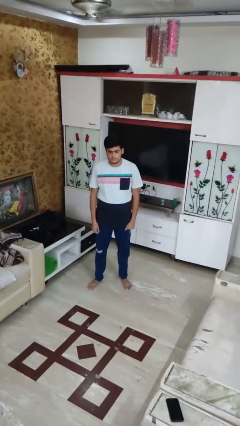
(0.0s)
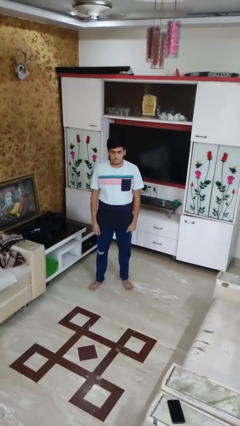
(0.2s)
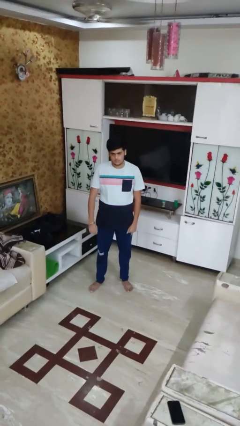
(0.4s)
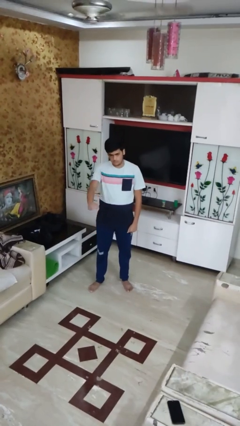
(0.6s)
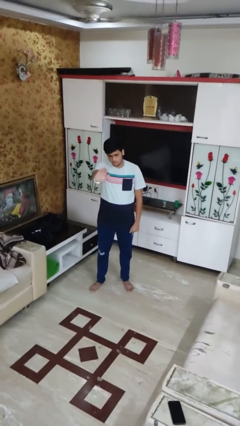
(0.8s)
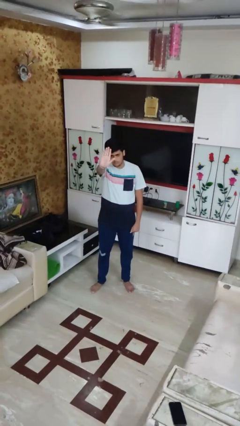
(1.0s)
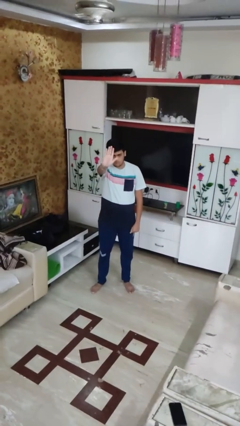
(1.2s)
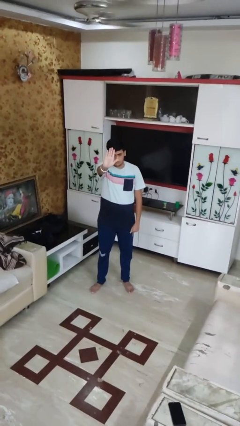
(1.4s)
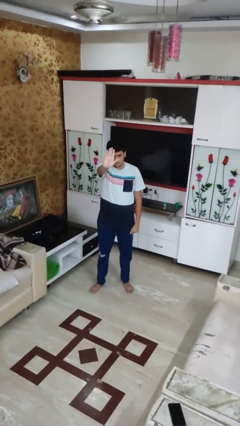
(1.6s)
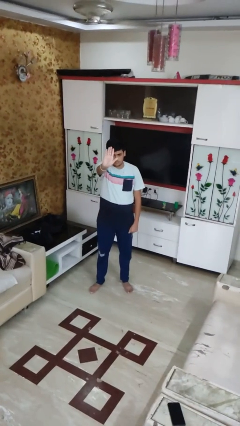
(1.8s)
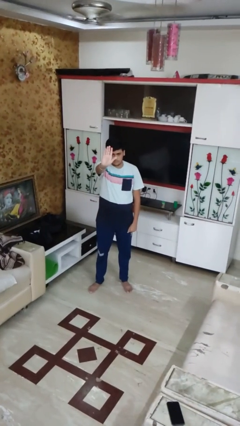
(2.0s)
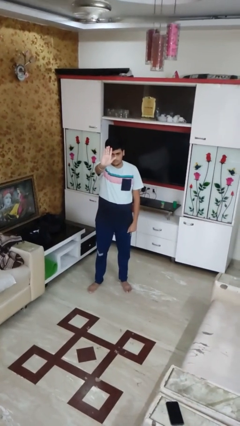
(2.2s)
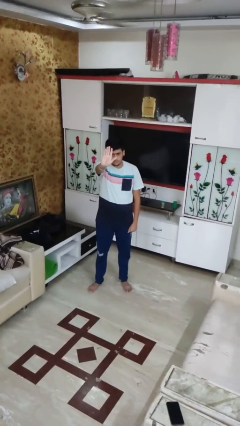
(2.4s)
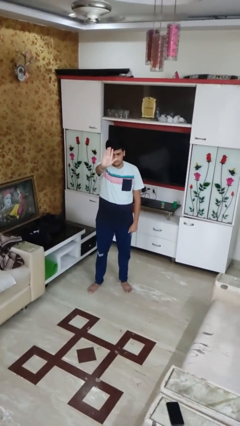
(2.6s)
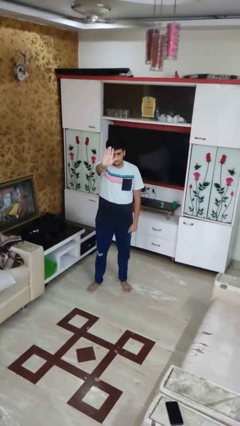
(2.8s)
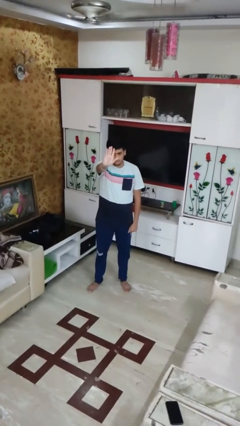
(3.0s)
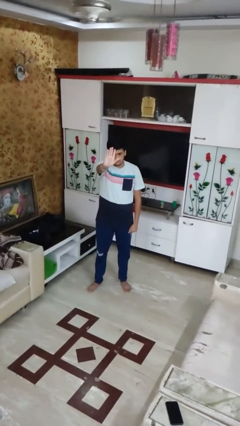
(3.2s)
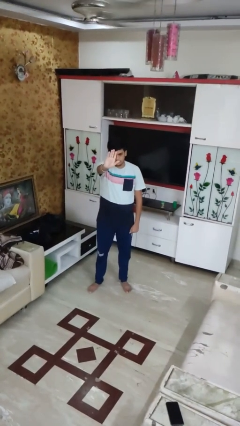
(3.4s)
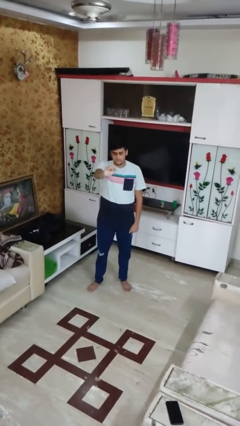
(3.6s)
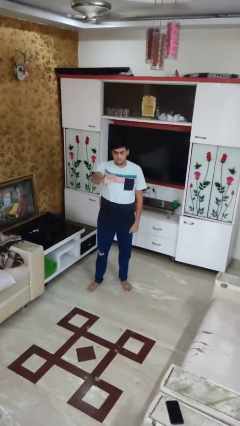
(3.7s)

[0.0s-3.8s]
person gestures stop

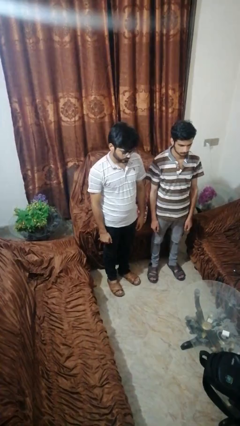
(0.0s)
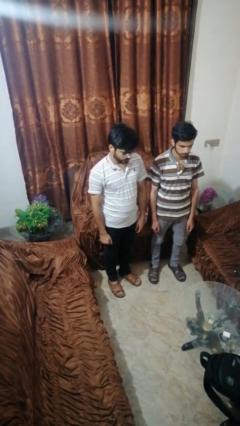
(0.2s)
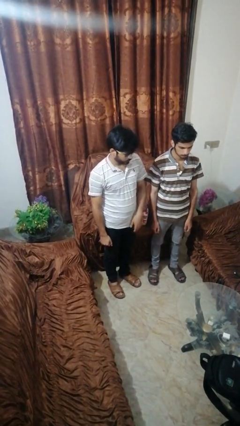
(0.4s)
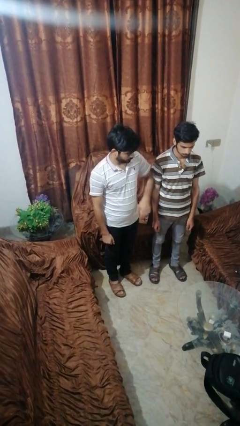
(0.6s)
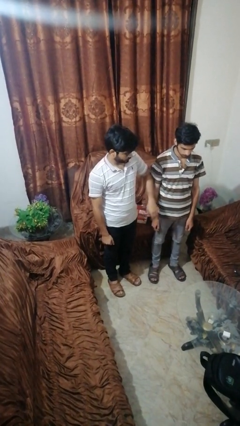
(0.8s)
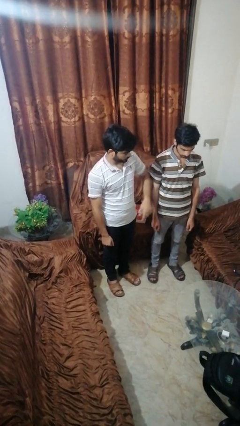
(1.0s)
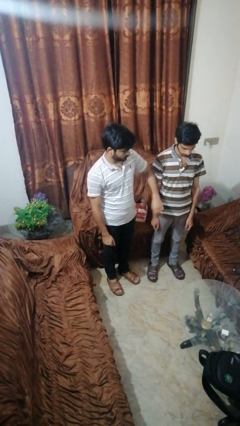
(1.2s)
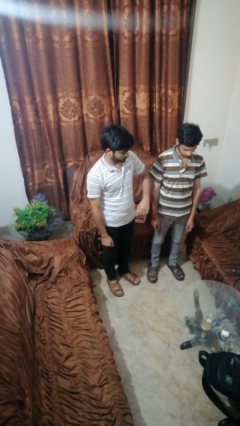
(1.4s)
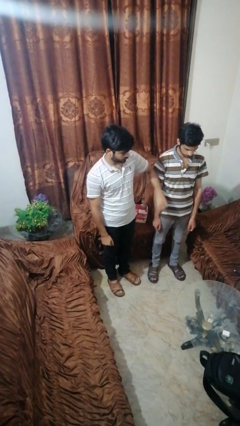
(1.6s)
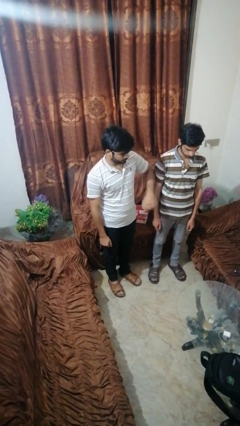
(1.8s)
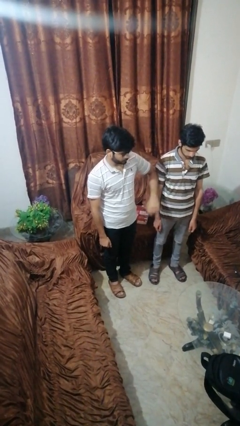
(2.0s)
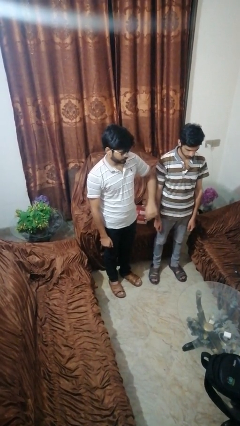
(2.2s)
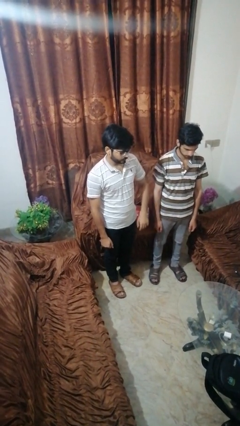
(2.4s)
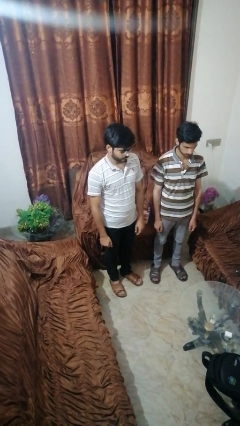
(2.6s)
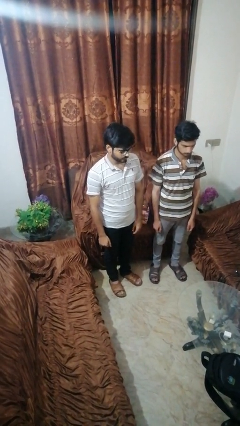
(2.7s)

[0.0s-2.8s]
person nudges person with elbow

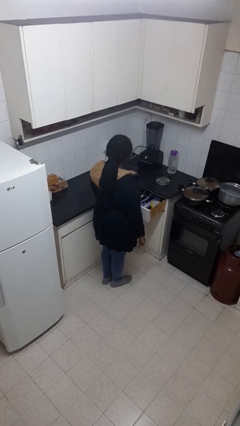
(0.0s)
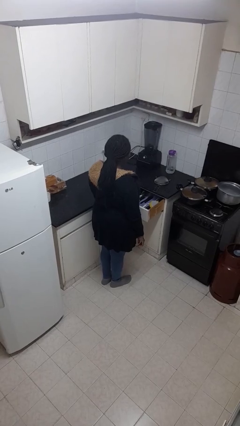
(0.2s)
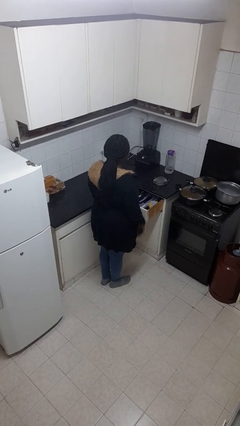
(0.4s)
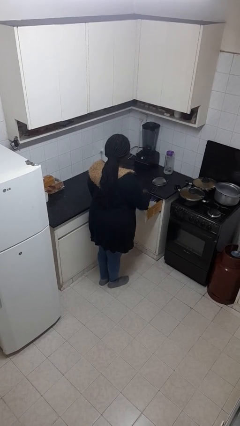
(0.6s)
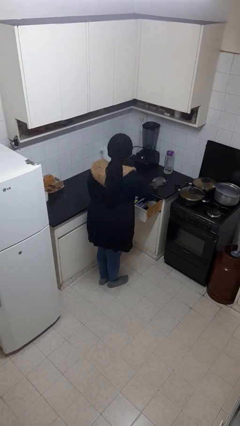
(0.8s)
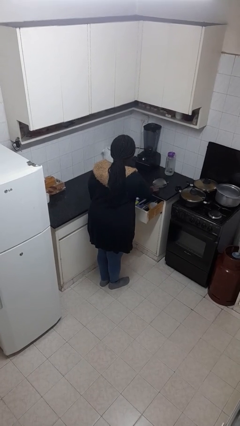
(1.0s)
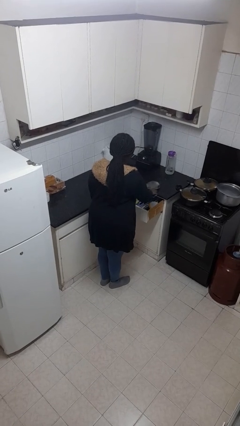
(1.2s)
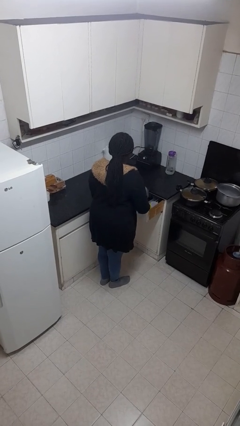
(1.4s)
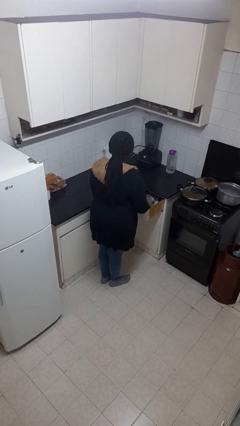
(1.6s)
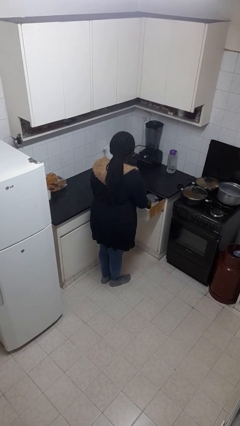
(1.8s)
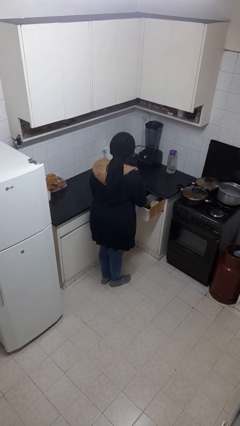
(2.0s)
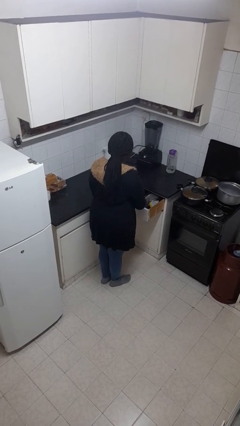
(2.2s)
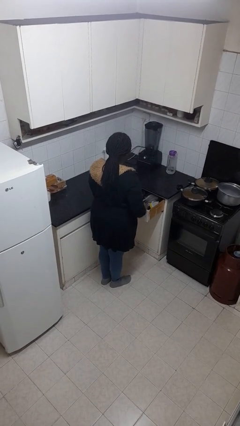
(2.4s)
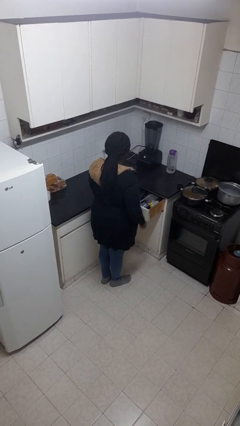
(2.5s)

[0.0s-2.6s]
person puts object into kitchen drawer

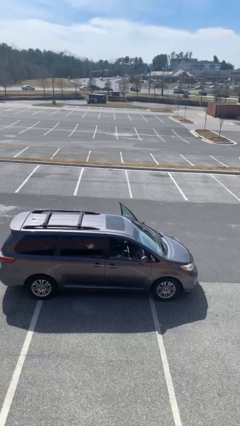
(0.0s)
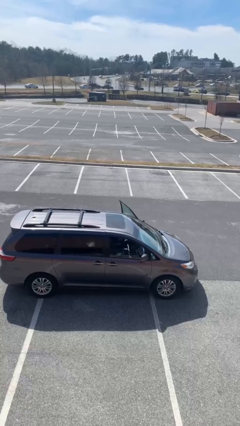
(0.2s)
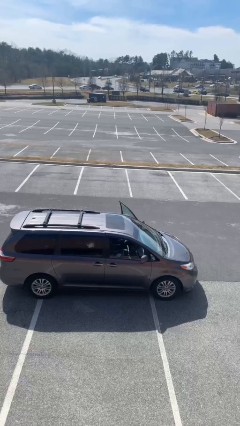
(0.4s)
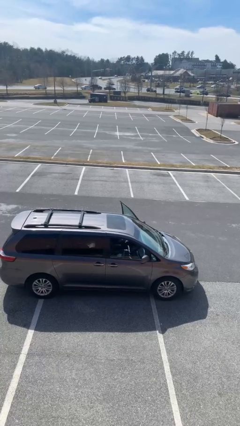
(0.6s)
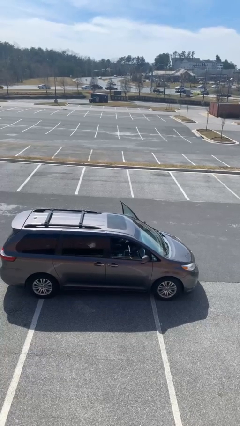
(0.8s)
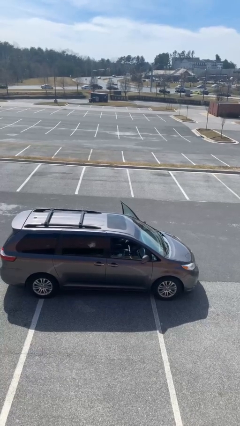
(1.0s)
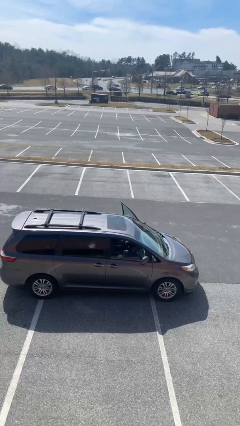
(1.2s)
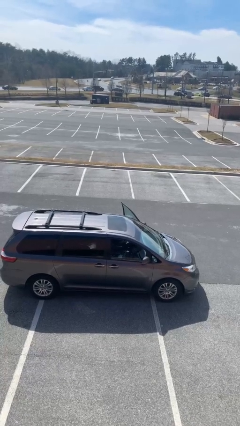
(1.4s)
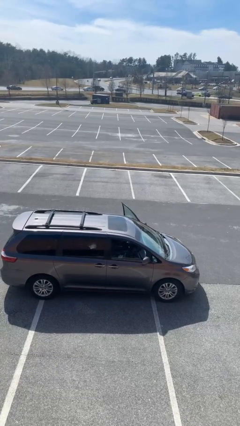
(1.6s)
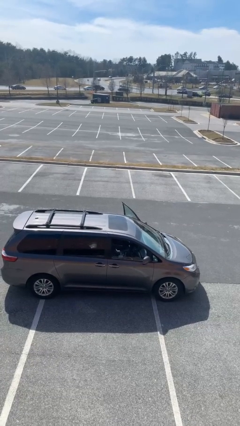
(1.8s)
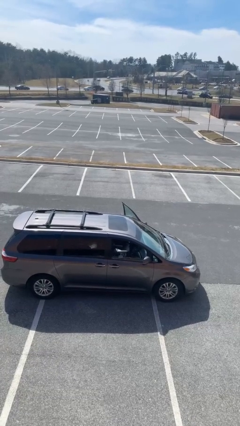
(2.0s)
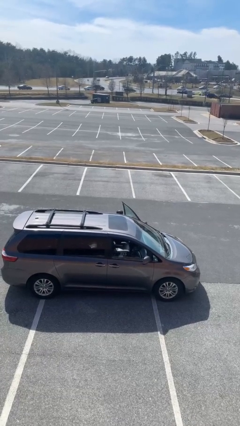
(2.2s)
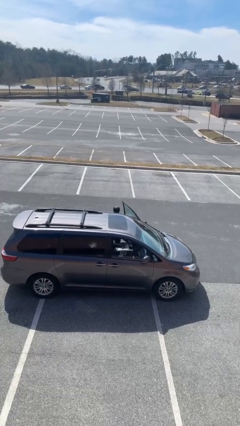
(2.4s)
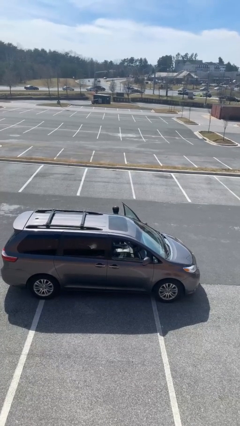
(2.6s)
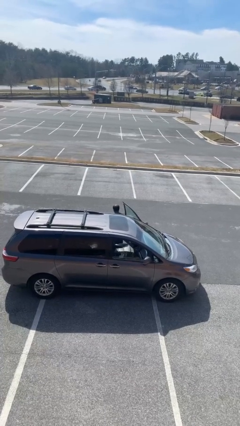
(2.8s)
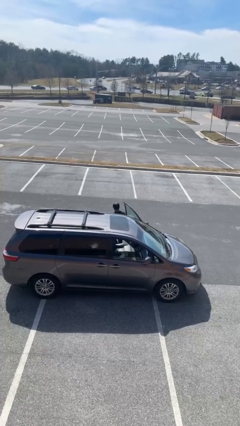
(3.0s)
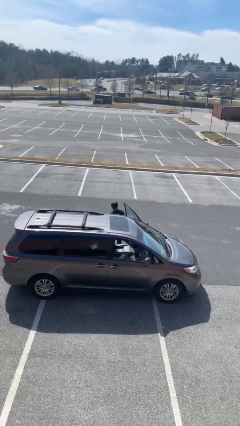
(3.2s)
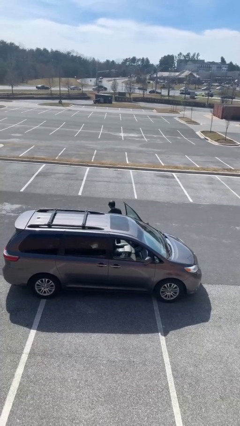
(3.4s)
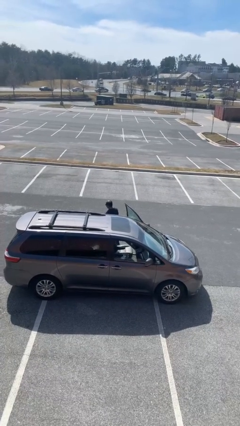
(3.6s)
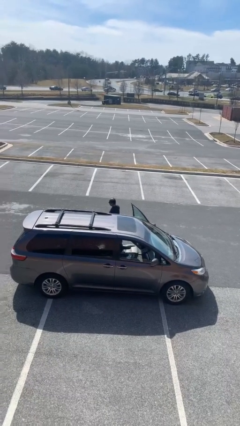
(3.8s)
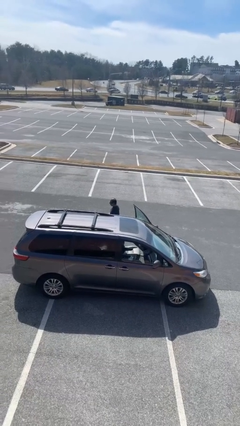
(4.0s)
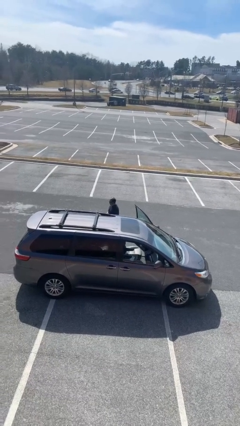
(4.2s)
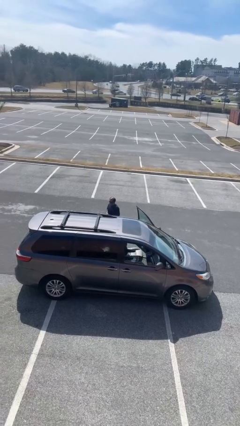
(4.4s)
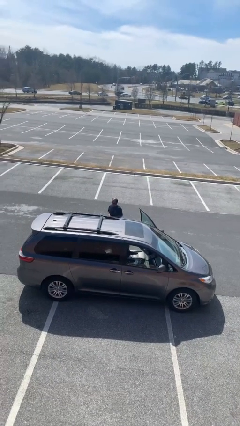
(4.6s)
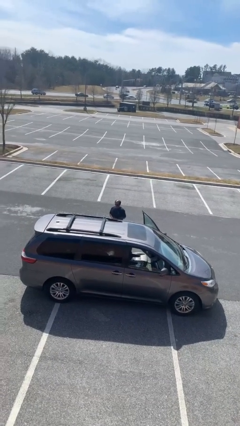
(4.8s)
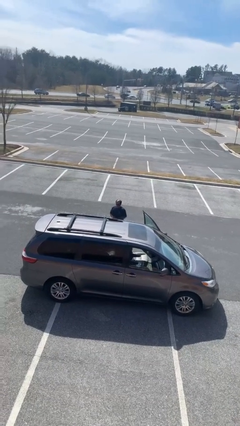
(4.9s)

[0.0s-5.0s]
person exits car

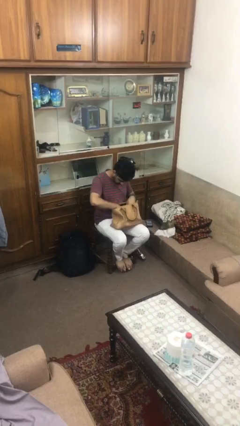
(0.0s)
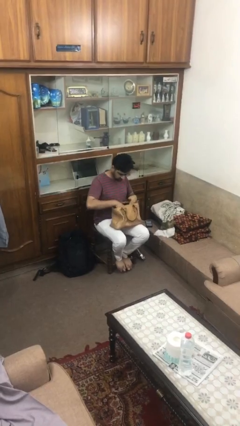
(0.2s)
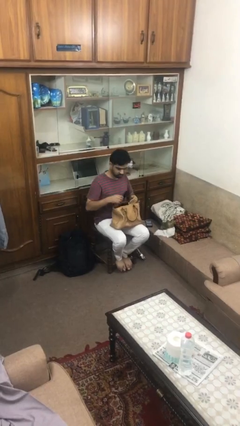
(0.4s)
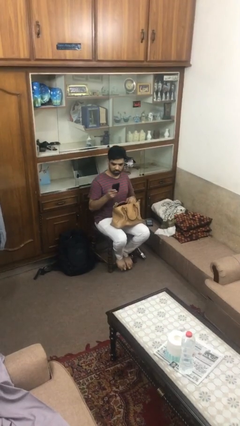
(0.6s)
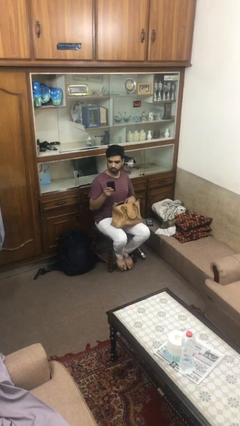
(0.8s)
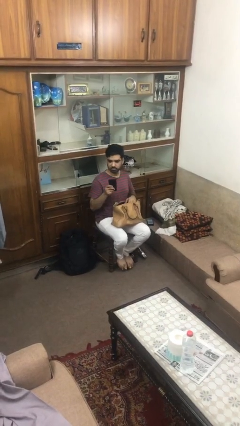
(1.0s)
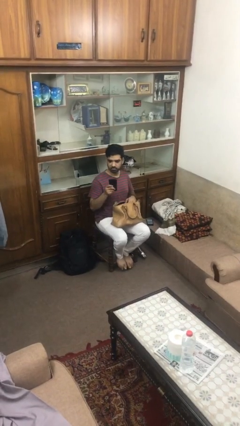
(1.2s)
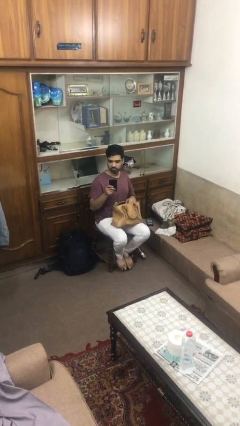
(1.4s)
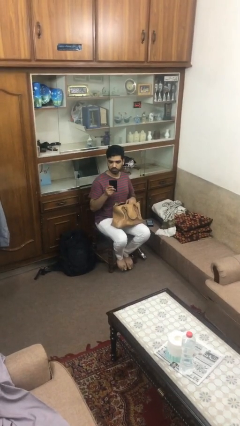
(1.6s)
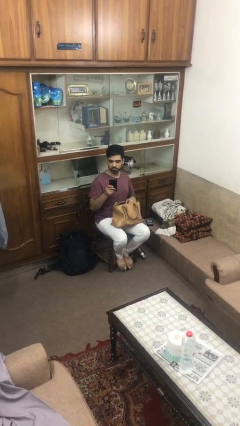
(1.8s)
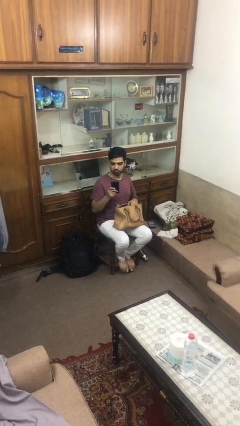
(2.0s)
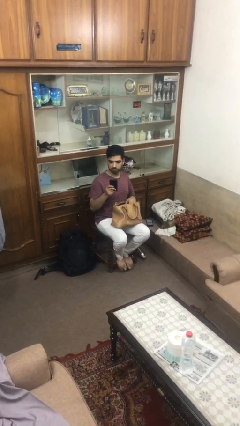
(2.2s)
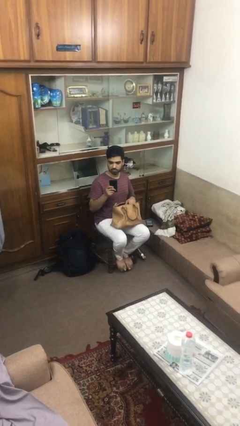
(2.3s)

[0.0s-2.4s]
person takes object from purse

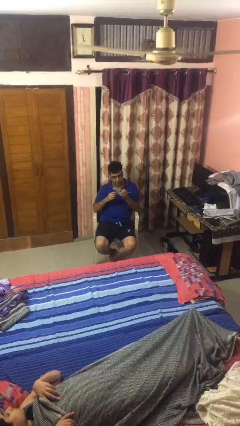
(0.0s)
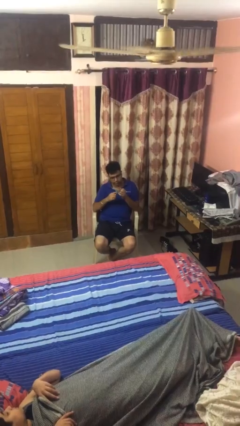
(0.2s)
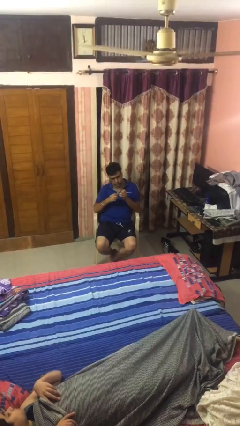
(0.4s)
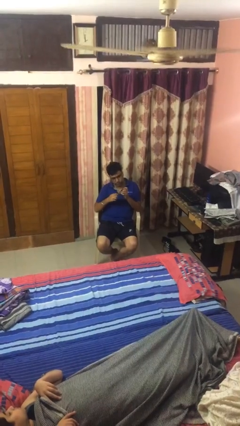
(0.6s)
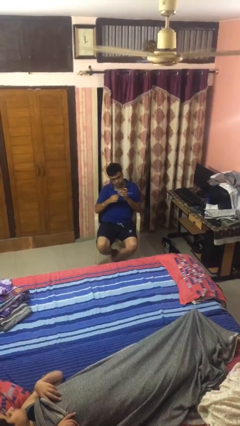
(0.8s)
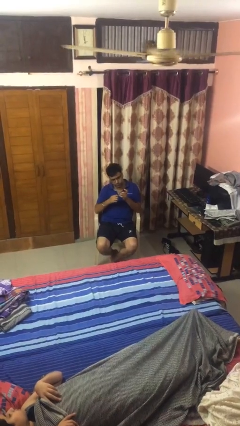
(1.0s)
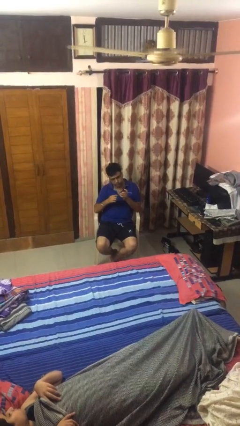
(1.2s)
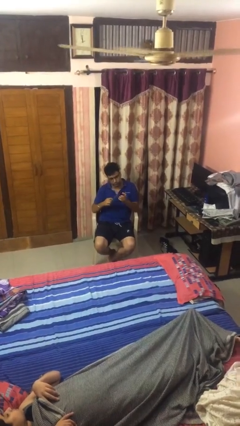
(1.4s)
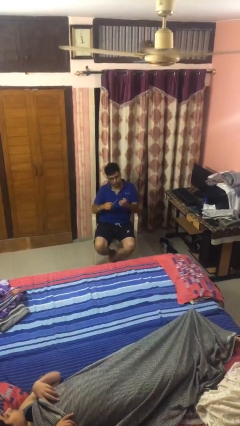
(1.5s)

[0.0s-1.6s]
person files fingernails
